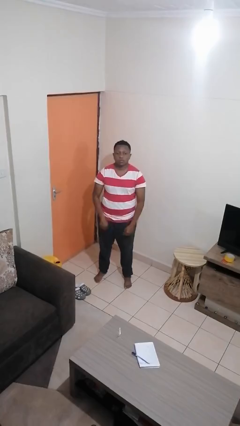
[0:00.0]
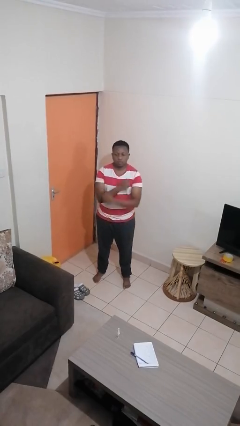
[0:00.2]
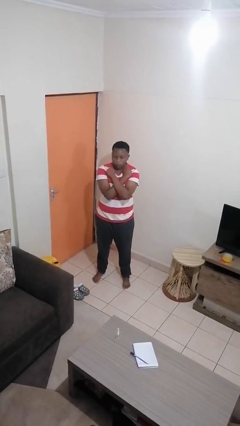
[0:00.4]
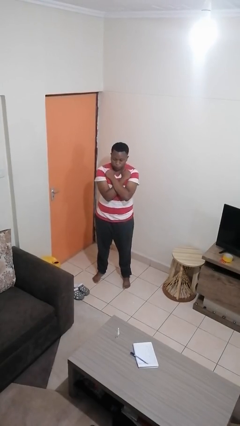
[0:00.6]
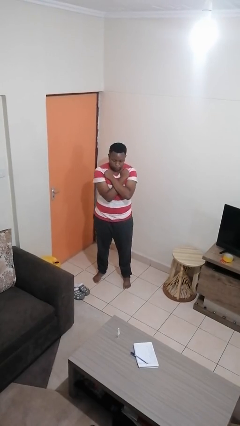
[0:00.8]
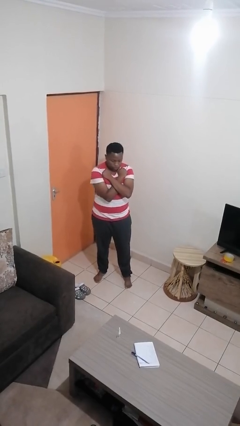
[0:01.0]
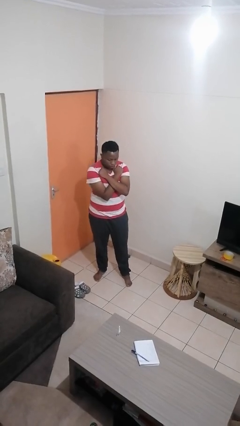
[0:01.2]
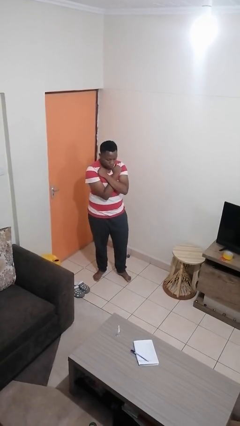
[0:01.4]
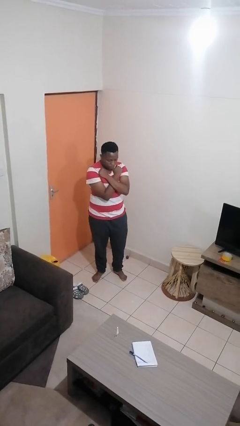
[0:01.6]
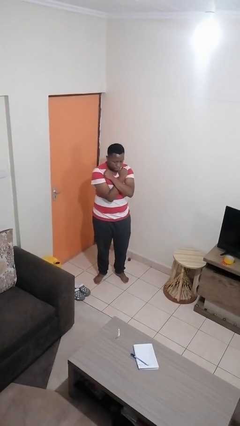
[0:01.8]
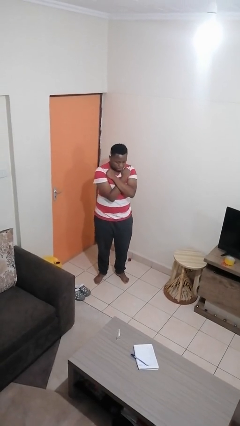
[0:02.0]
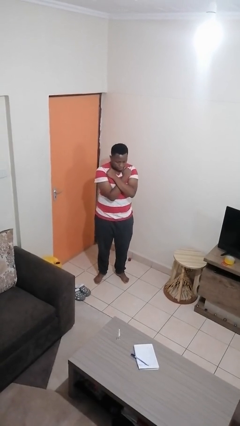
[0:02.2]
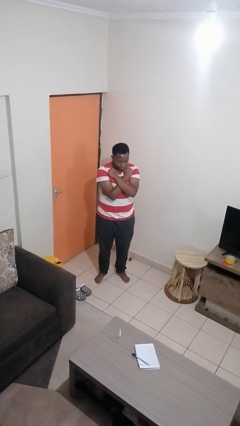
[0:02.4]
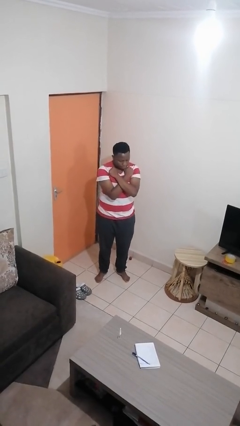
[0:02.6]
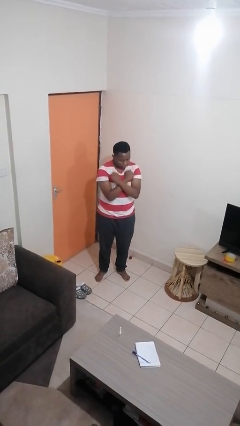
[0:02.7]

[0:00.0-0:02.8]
person gestures arms x

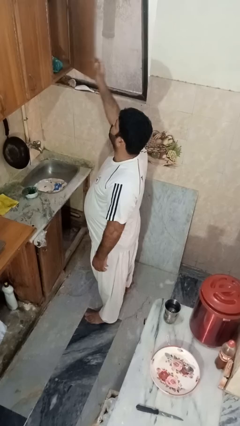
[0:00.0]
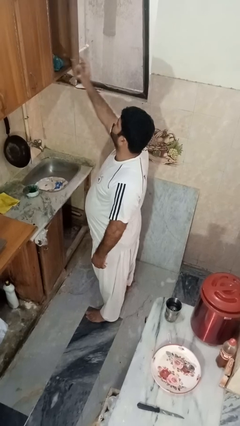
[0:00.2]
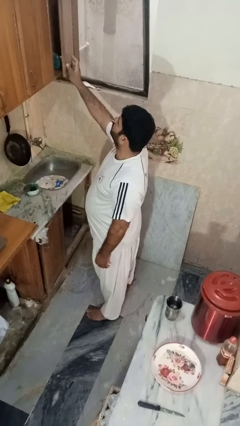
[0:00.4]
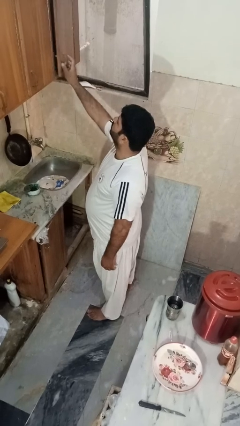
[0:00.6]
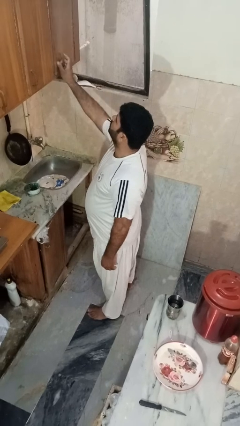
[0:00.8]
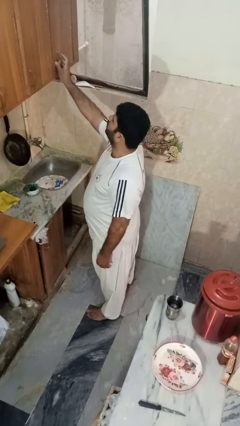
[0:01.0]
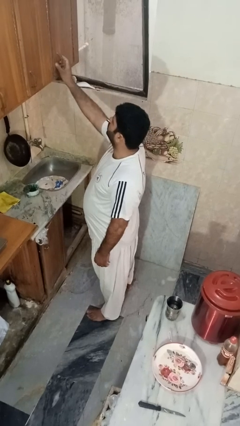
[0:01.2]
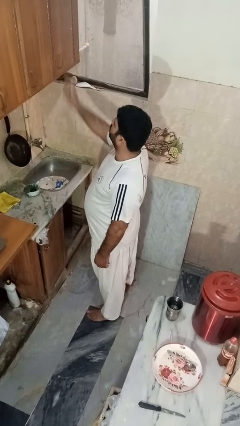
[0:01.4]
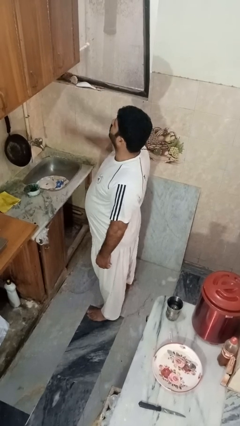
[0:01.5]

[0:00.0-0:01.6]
person closes cabinet

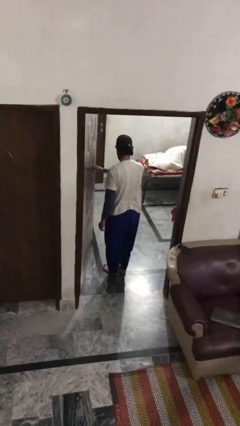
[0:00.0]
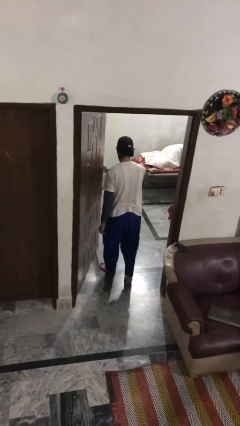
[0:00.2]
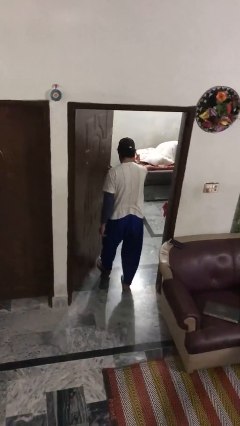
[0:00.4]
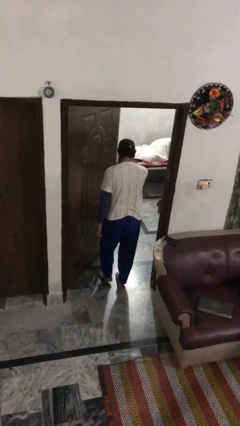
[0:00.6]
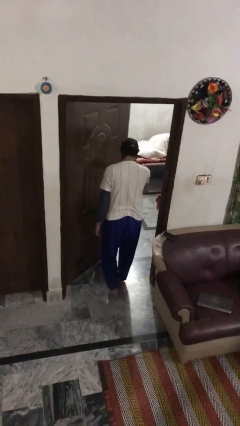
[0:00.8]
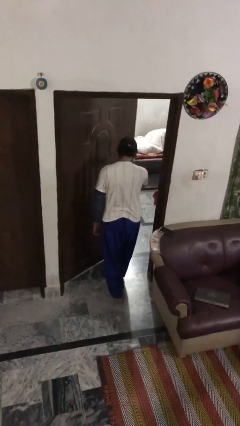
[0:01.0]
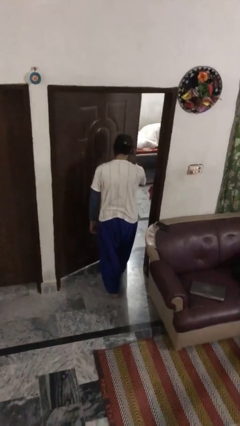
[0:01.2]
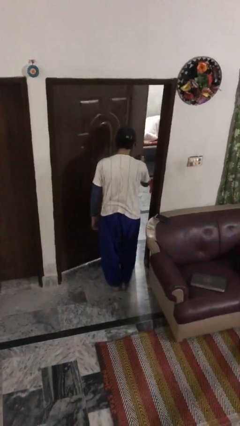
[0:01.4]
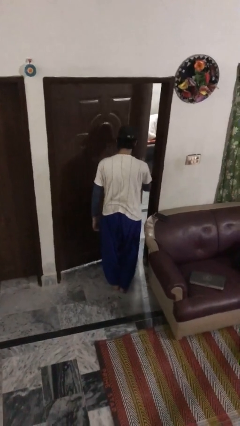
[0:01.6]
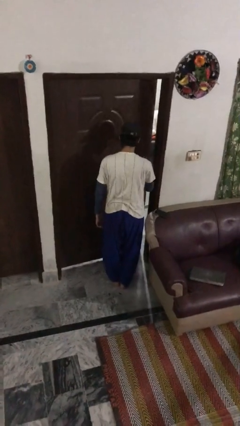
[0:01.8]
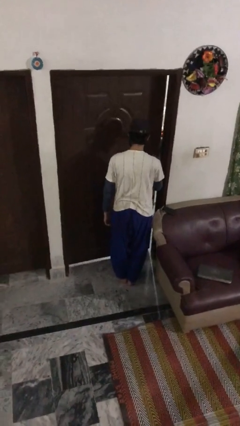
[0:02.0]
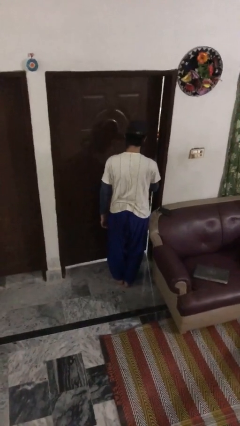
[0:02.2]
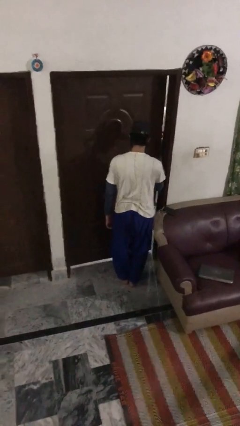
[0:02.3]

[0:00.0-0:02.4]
person closes facility door

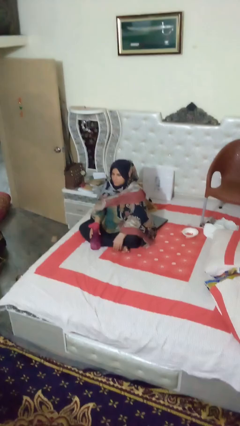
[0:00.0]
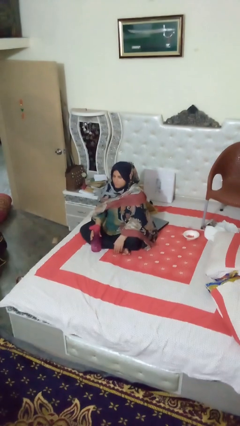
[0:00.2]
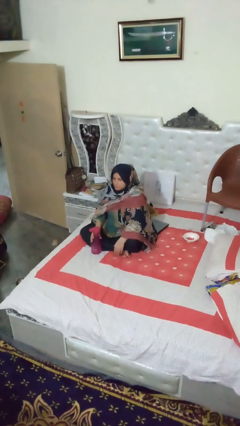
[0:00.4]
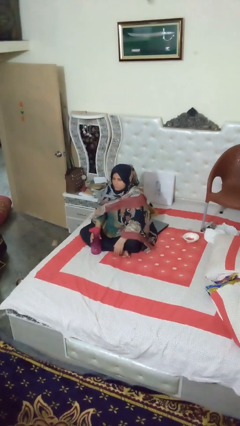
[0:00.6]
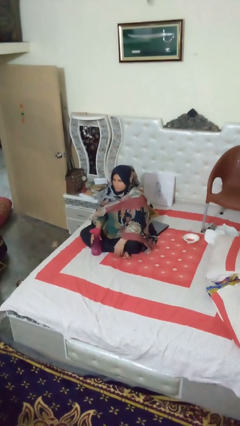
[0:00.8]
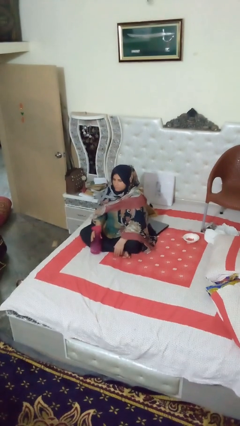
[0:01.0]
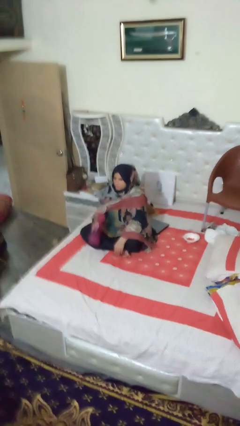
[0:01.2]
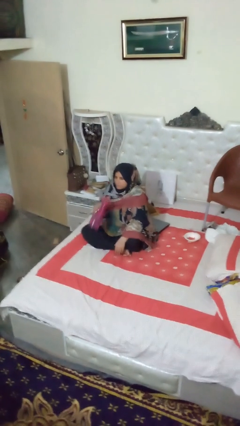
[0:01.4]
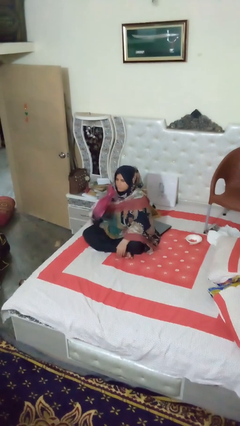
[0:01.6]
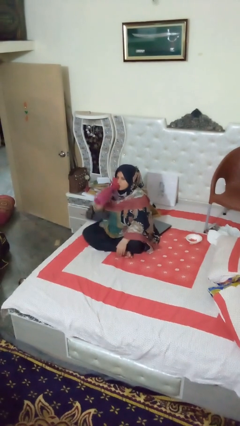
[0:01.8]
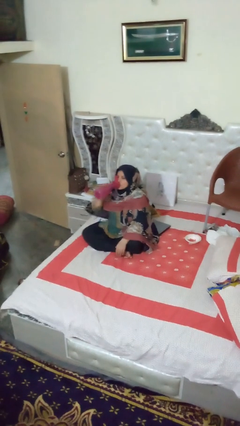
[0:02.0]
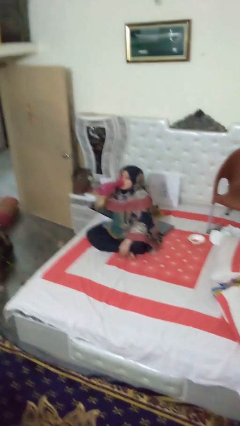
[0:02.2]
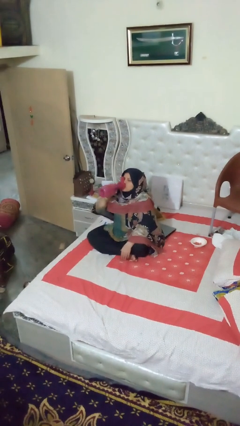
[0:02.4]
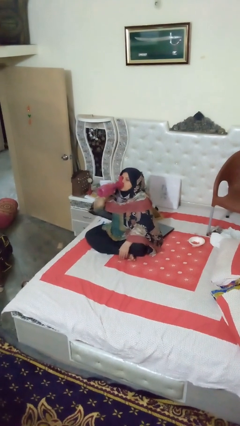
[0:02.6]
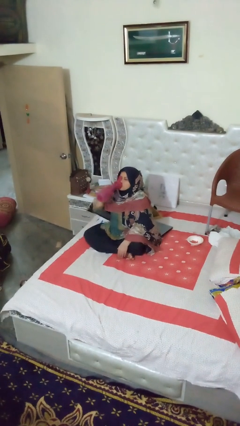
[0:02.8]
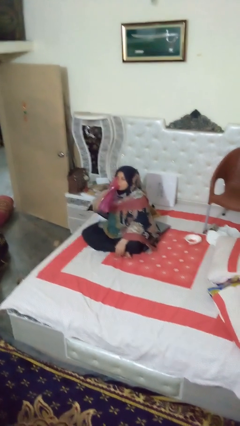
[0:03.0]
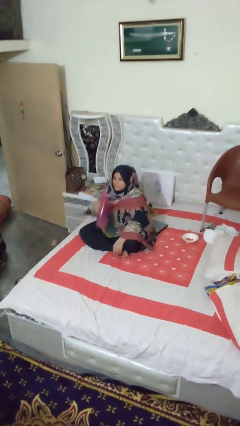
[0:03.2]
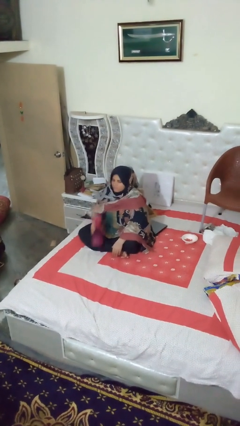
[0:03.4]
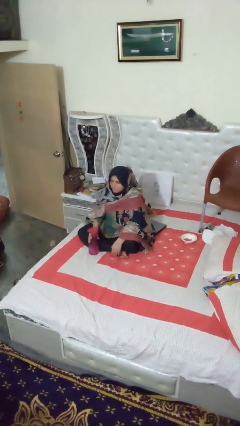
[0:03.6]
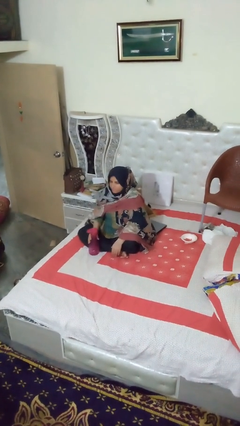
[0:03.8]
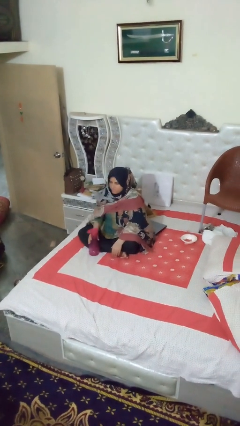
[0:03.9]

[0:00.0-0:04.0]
person drinks from bottle

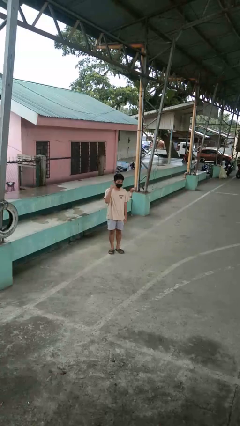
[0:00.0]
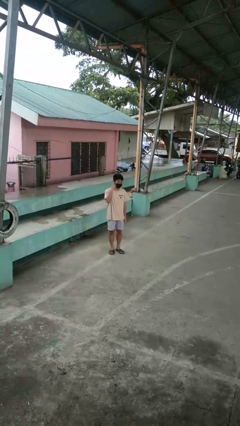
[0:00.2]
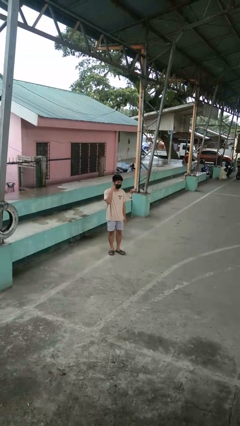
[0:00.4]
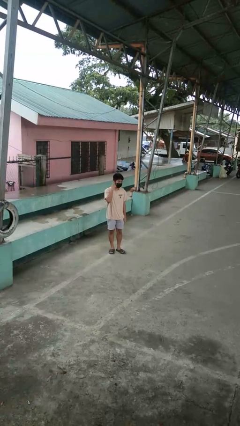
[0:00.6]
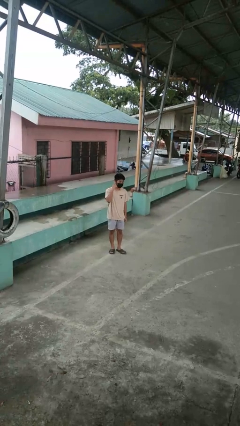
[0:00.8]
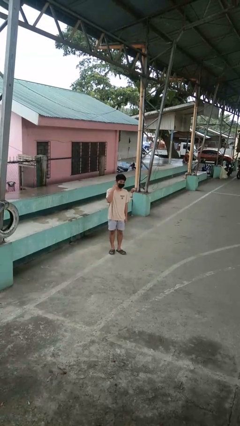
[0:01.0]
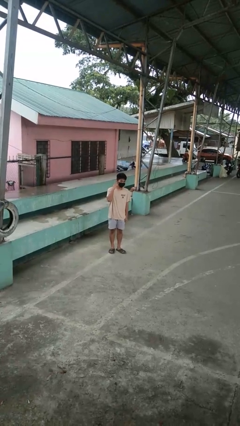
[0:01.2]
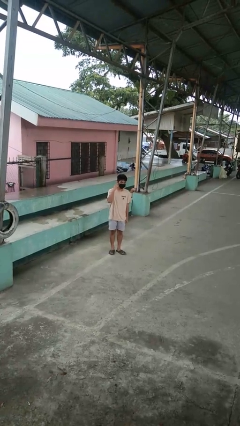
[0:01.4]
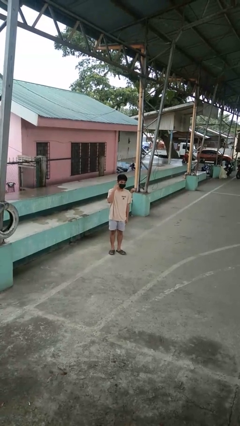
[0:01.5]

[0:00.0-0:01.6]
person gestures listen closely

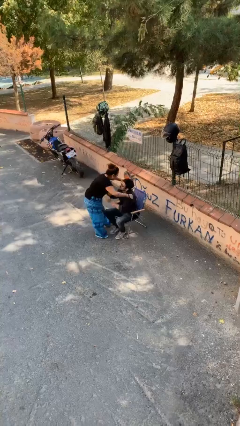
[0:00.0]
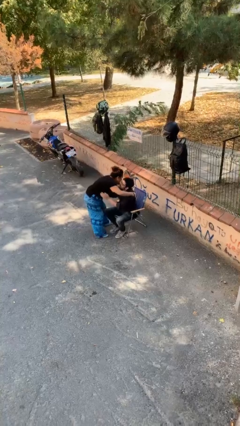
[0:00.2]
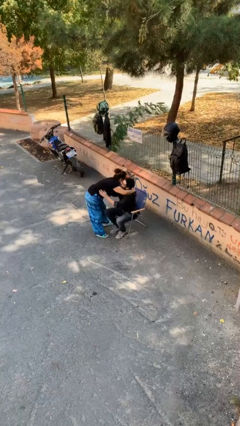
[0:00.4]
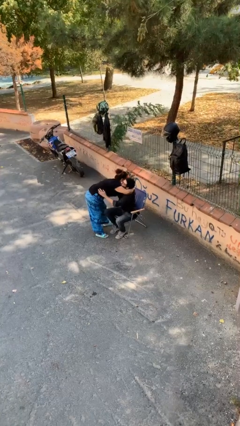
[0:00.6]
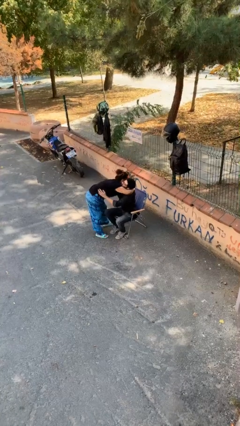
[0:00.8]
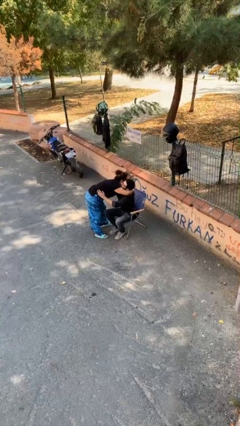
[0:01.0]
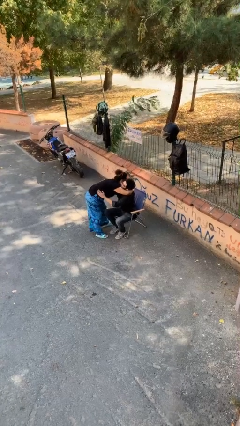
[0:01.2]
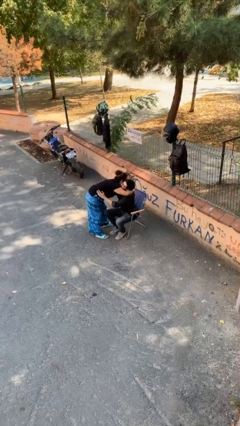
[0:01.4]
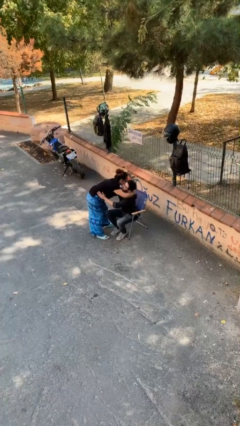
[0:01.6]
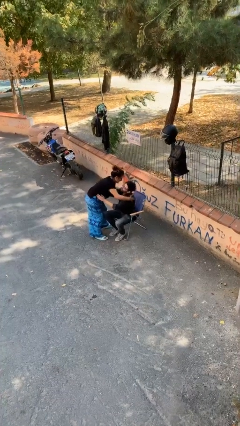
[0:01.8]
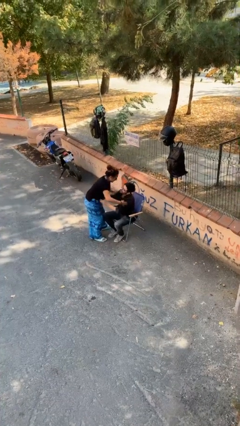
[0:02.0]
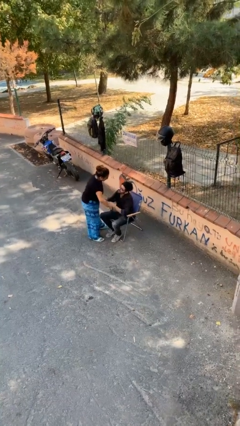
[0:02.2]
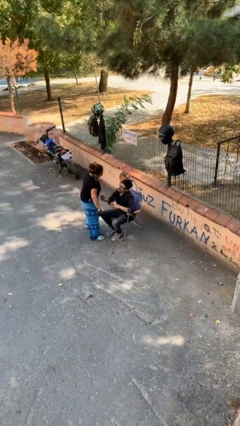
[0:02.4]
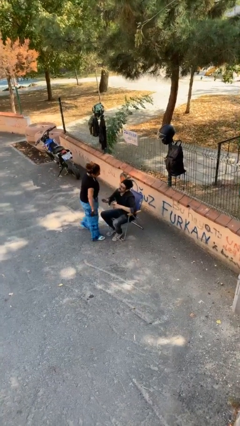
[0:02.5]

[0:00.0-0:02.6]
person embraces person

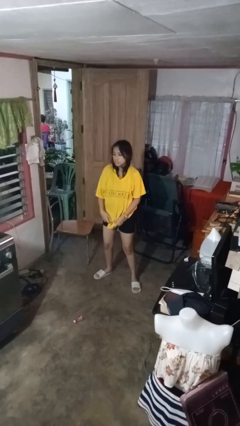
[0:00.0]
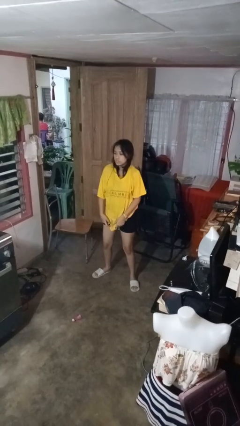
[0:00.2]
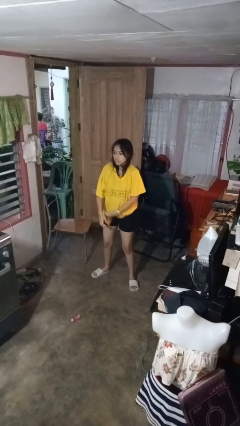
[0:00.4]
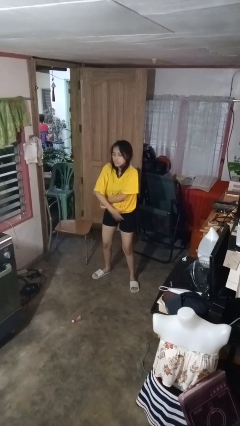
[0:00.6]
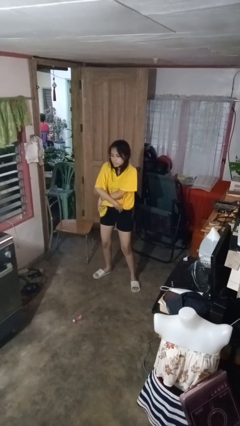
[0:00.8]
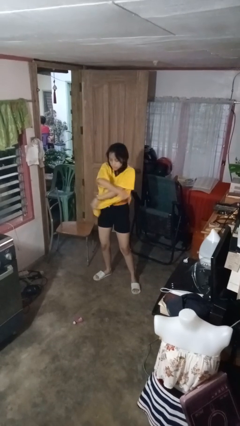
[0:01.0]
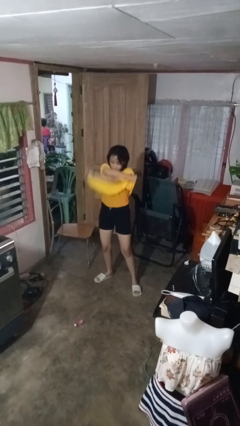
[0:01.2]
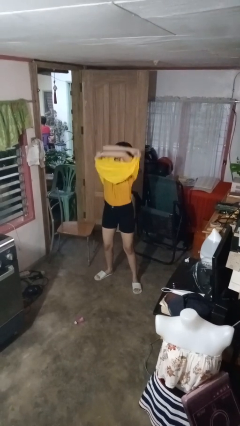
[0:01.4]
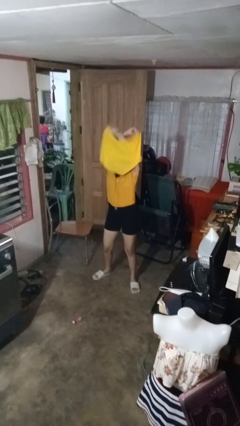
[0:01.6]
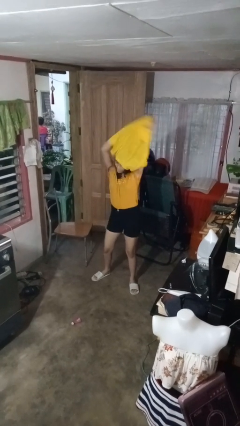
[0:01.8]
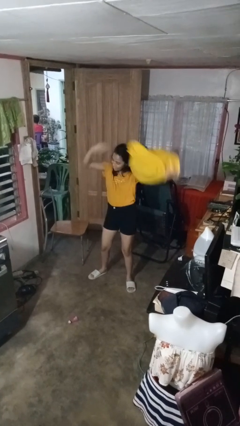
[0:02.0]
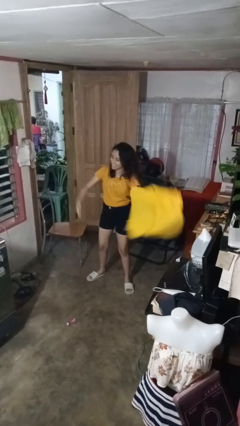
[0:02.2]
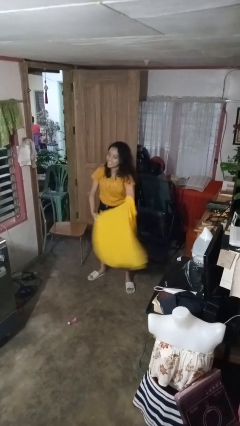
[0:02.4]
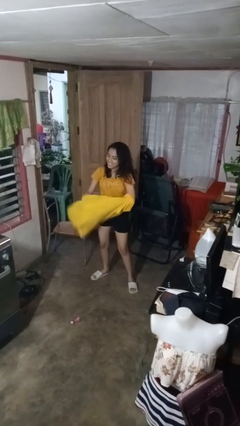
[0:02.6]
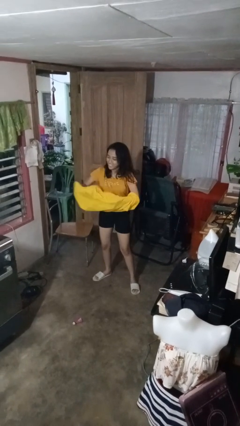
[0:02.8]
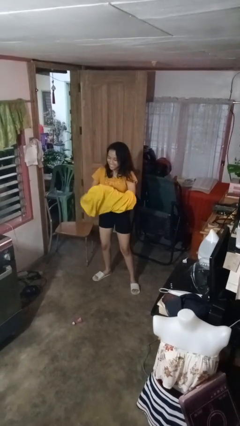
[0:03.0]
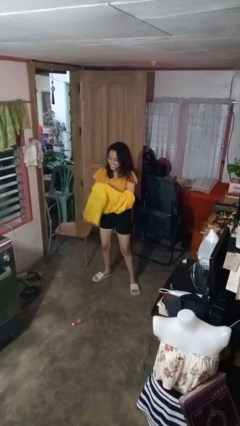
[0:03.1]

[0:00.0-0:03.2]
person takes off shirt
